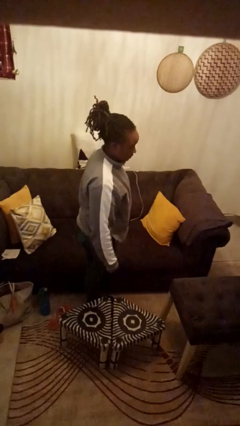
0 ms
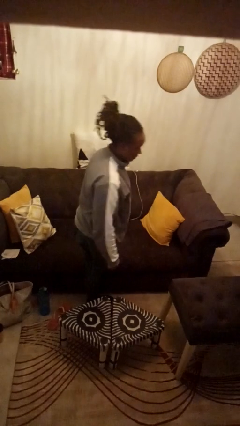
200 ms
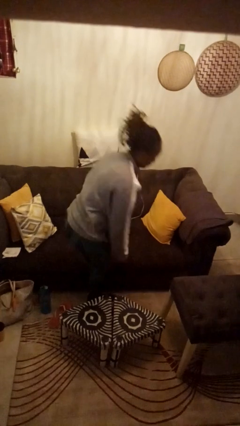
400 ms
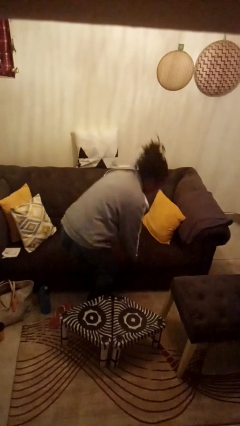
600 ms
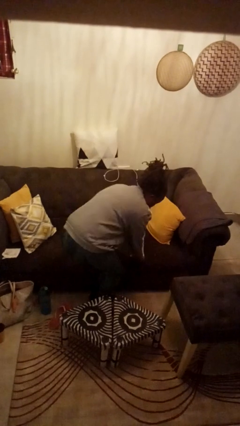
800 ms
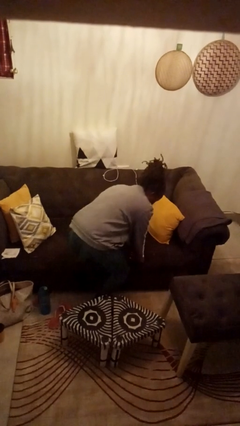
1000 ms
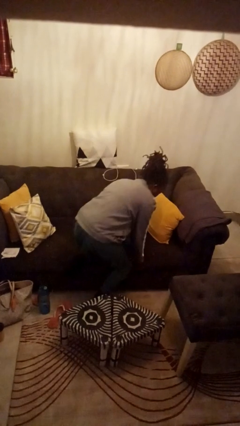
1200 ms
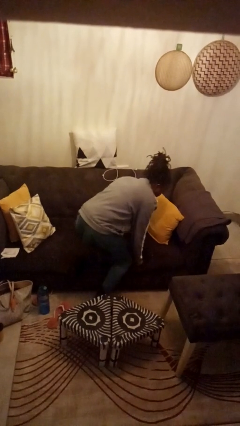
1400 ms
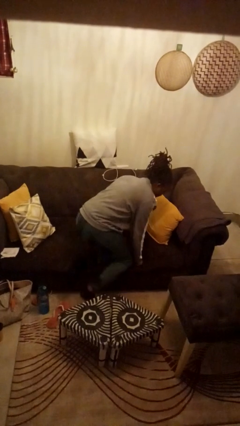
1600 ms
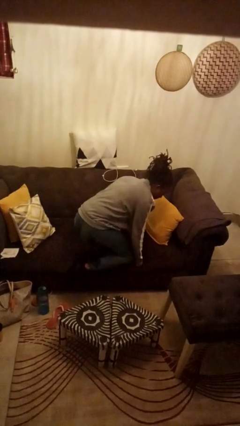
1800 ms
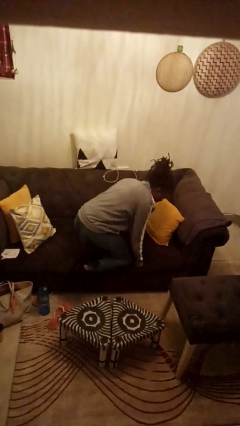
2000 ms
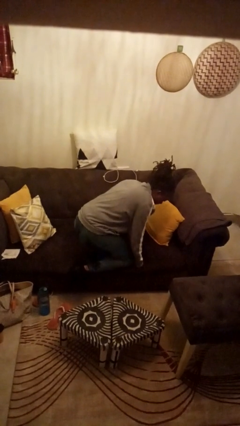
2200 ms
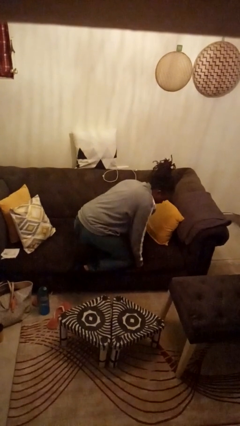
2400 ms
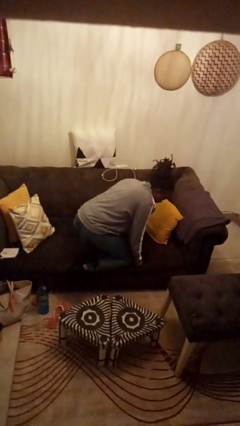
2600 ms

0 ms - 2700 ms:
person climbs on couch

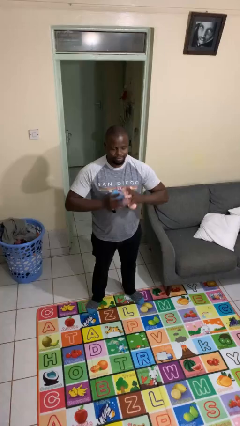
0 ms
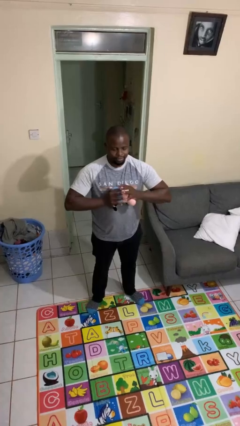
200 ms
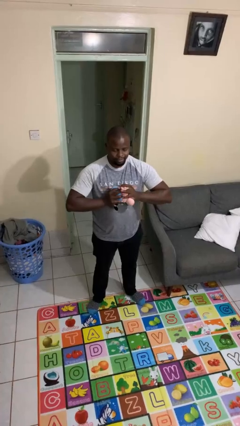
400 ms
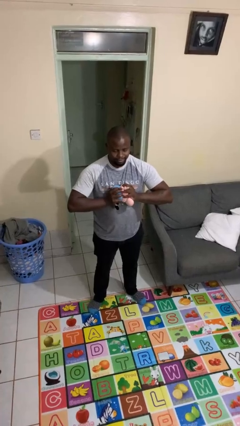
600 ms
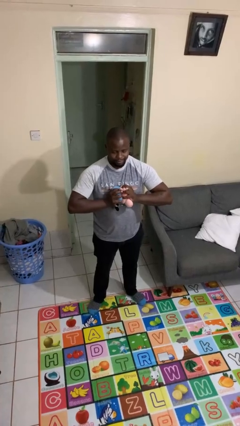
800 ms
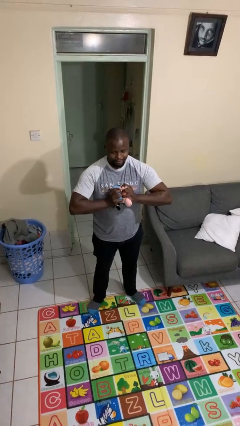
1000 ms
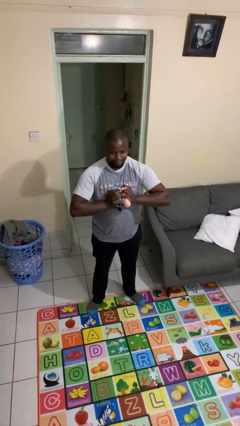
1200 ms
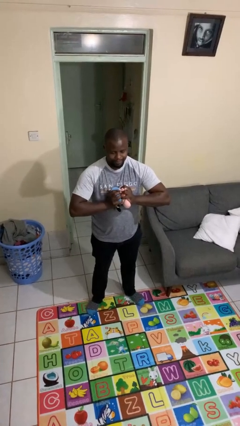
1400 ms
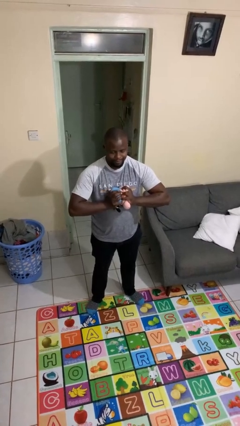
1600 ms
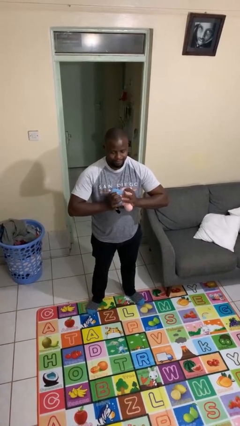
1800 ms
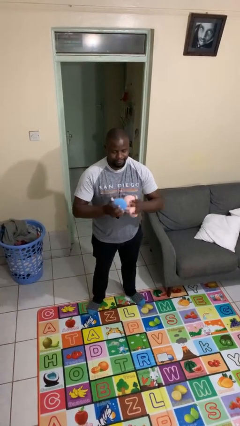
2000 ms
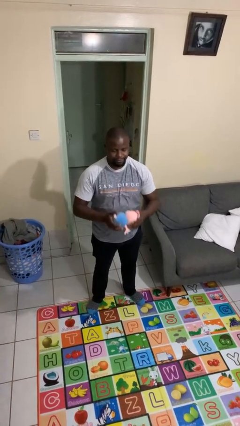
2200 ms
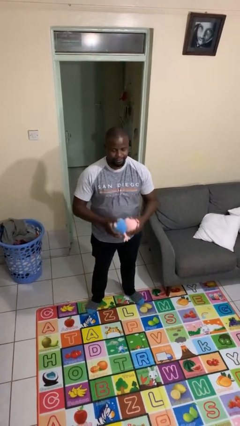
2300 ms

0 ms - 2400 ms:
person squeezes object

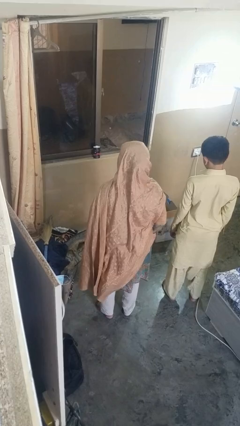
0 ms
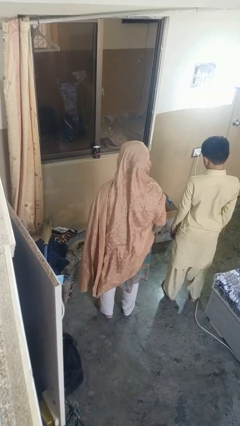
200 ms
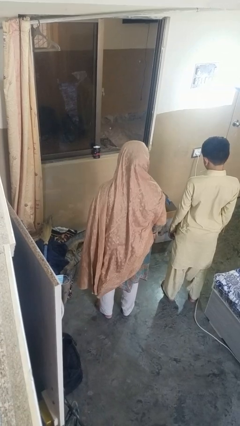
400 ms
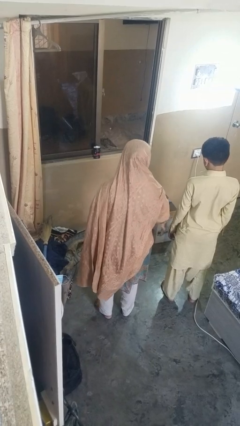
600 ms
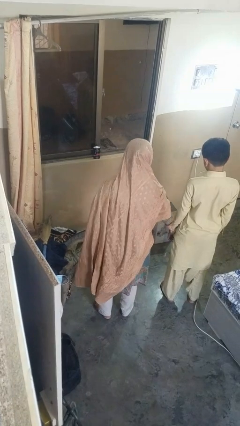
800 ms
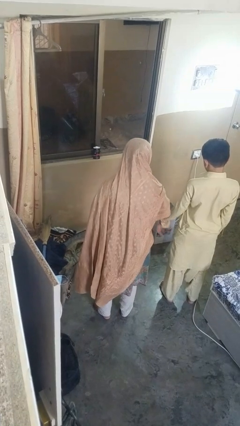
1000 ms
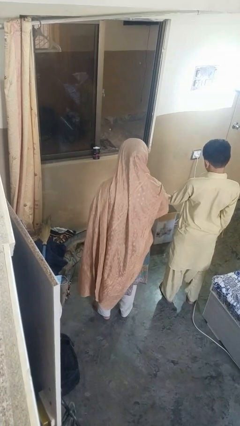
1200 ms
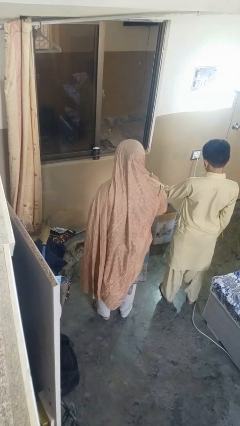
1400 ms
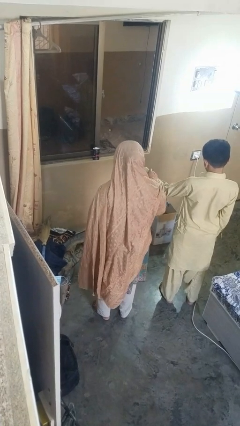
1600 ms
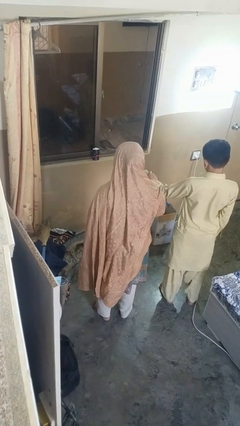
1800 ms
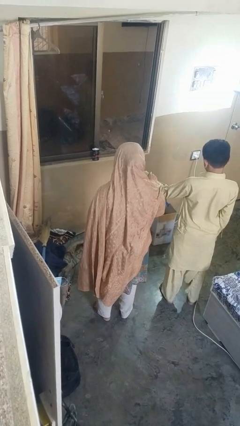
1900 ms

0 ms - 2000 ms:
person grabs person by forearm

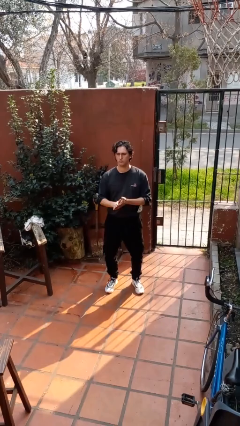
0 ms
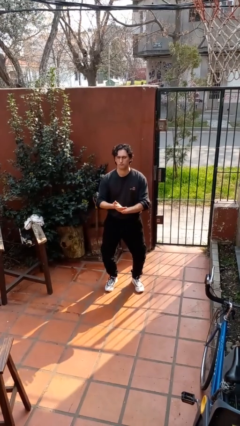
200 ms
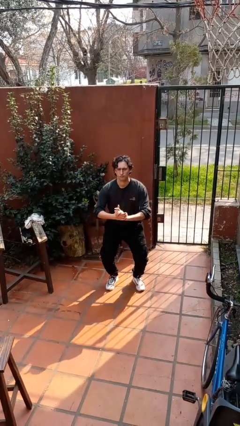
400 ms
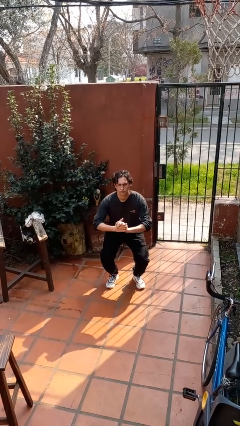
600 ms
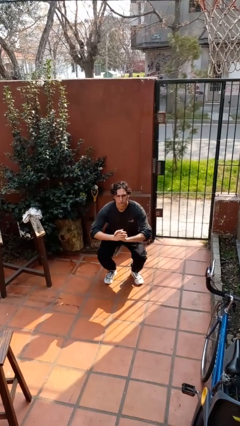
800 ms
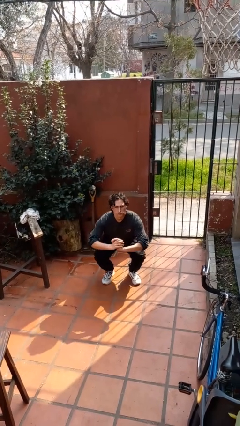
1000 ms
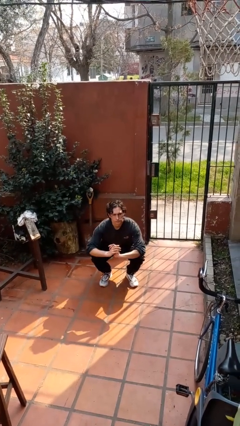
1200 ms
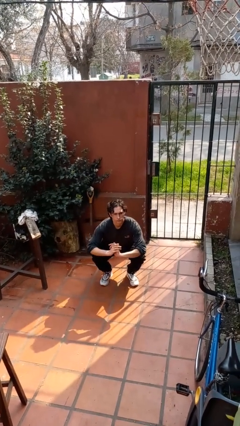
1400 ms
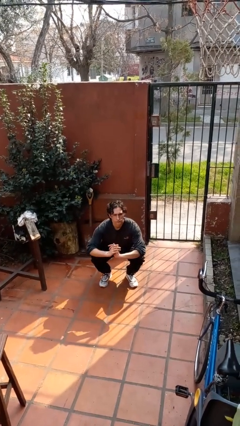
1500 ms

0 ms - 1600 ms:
person squats

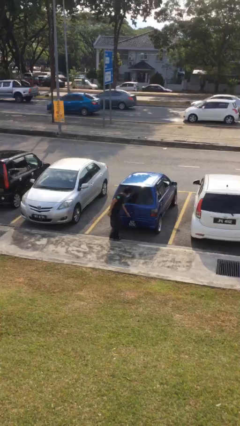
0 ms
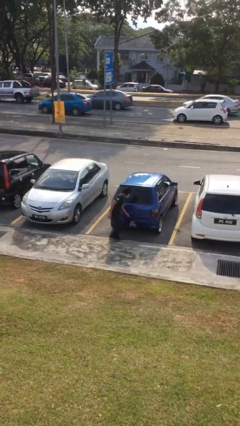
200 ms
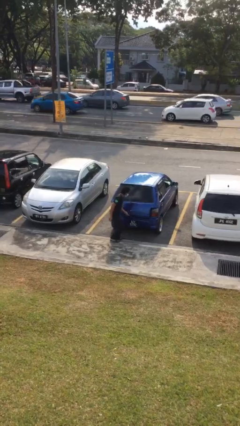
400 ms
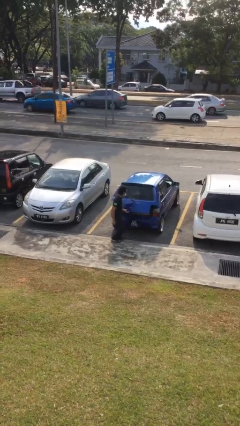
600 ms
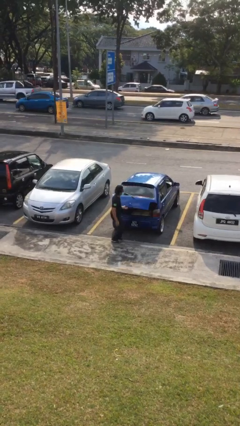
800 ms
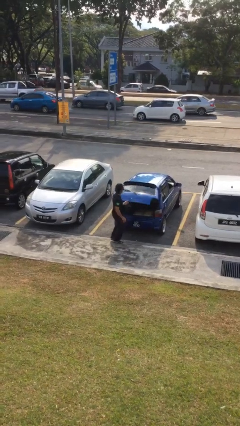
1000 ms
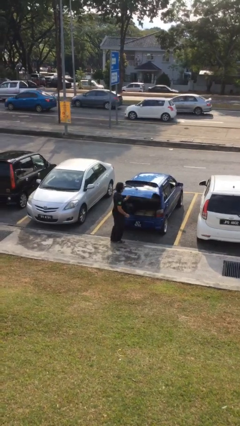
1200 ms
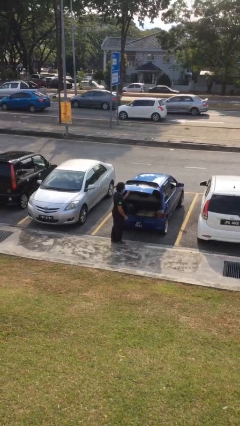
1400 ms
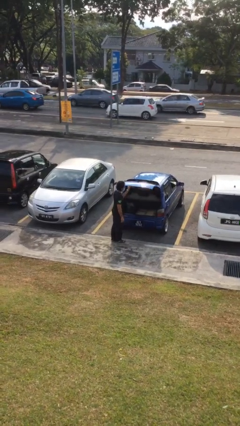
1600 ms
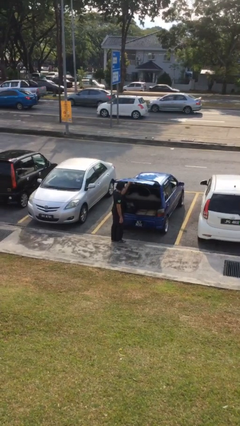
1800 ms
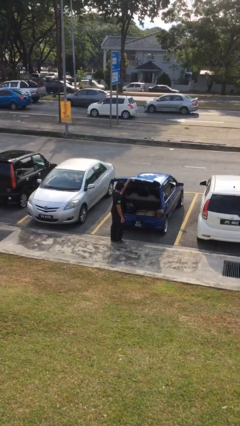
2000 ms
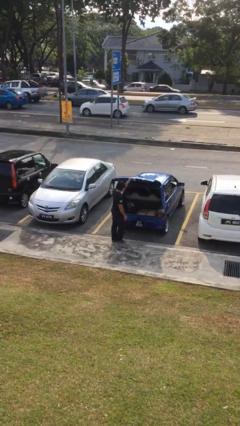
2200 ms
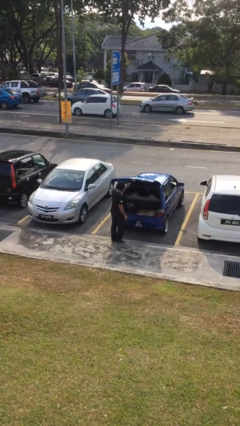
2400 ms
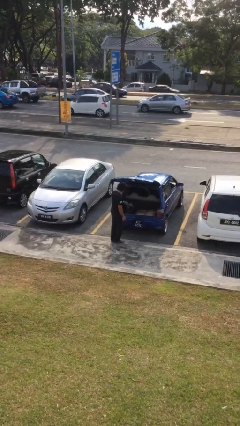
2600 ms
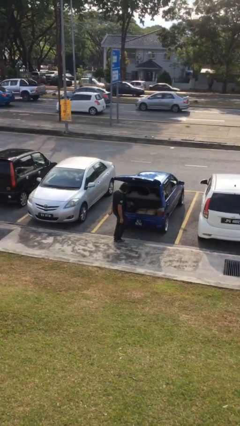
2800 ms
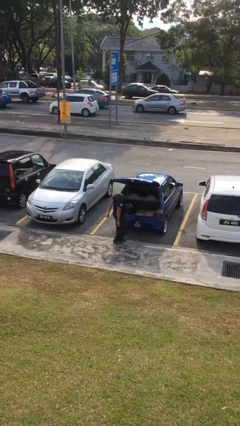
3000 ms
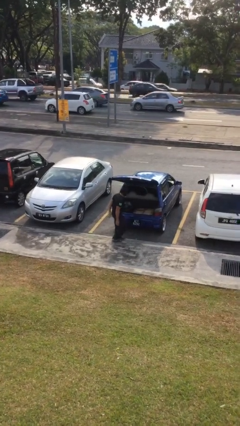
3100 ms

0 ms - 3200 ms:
person opens car trunk

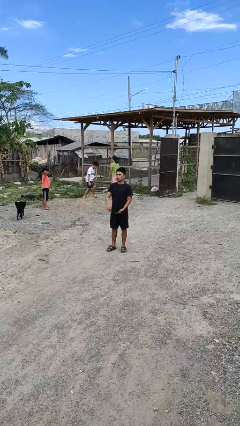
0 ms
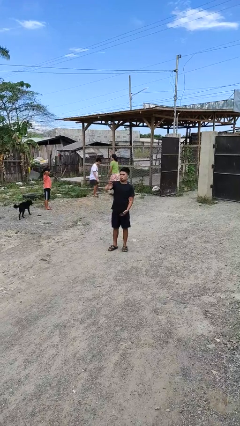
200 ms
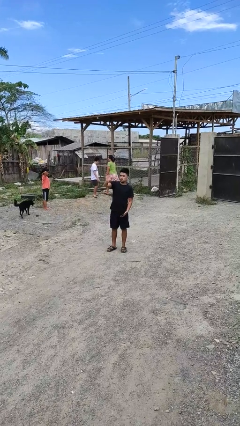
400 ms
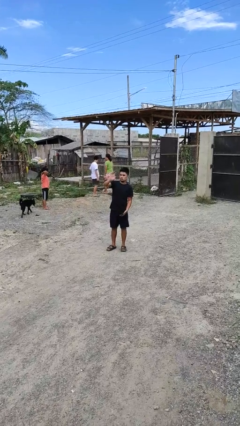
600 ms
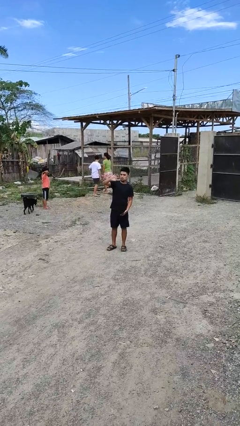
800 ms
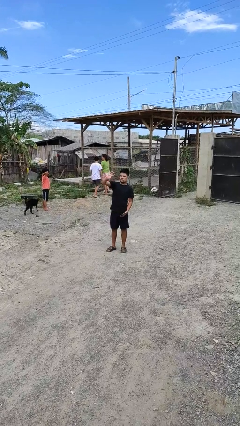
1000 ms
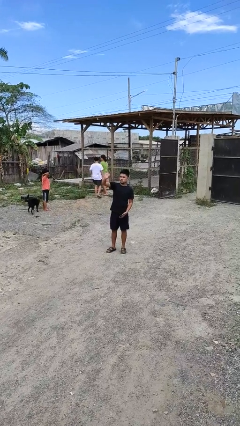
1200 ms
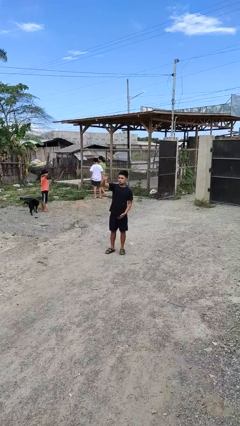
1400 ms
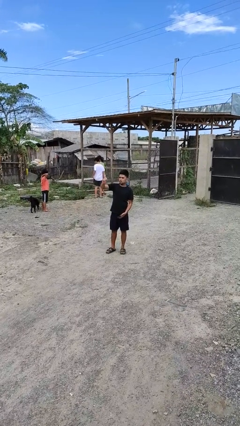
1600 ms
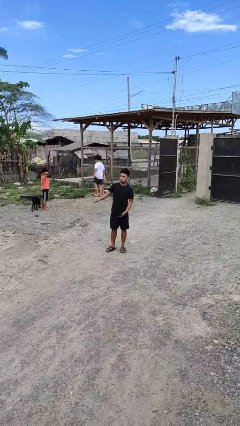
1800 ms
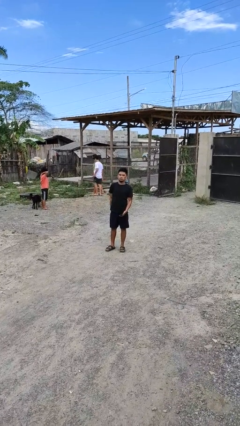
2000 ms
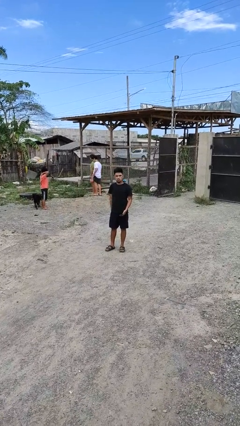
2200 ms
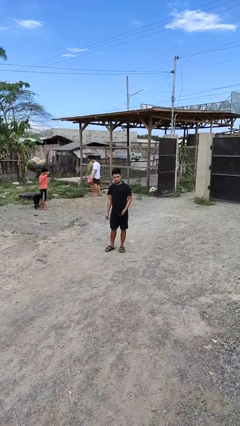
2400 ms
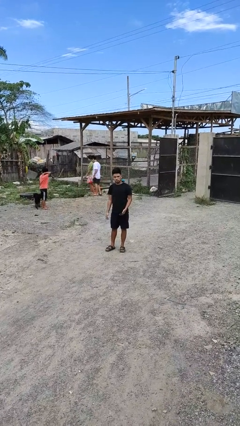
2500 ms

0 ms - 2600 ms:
person waves at person

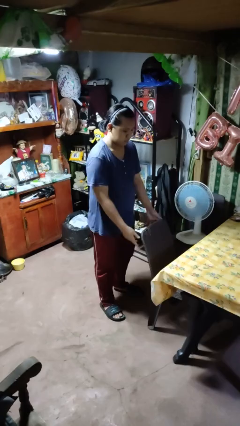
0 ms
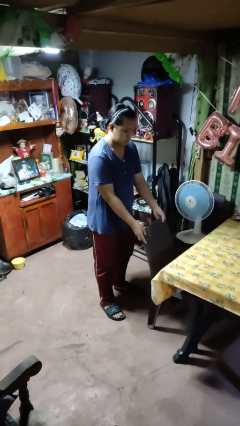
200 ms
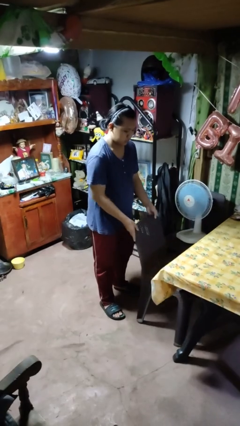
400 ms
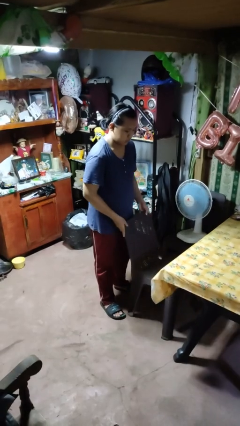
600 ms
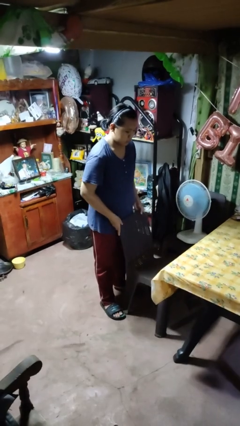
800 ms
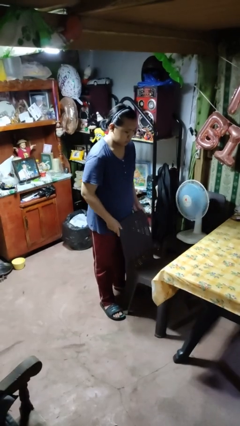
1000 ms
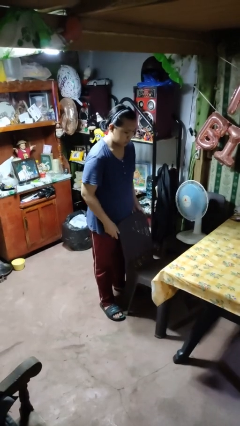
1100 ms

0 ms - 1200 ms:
person pulls out chair

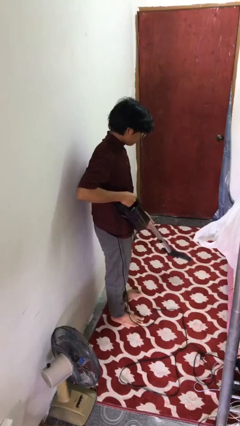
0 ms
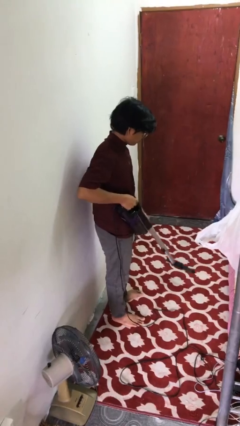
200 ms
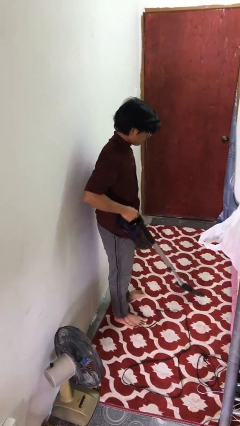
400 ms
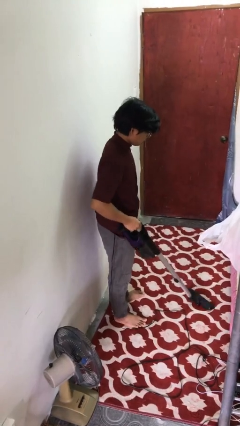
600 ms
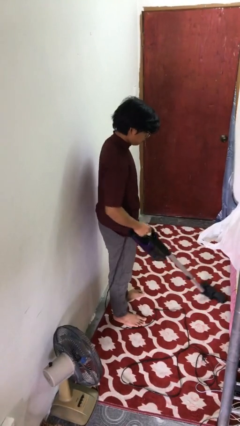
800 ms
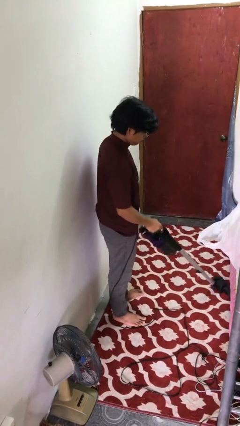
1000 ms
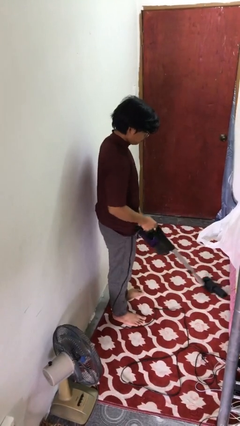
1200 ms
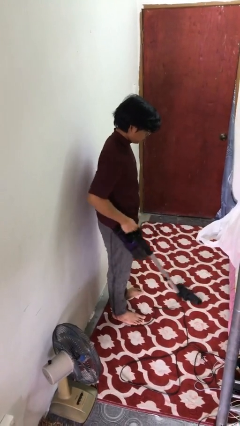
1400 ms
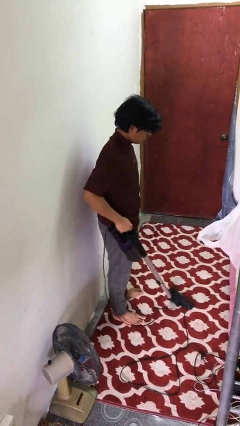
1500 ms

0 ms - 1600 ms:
person vacuums carpet
